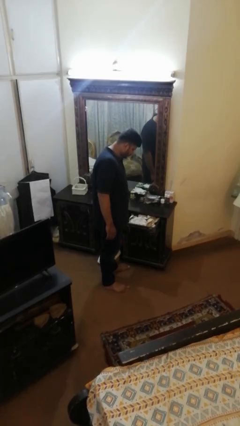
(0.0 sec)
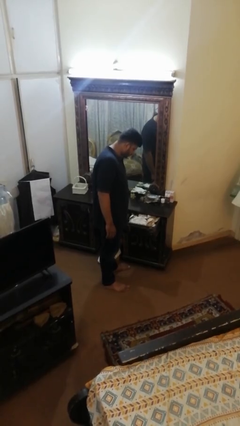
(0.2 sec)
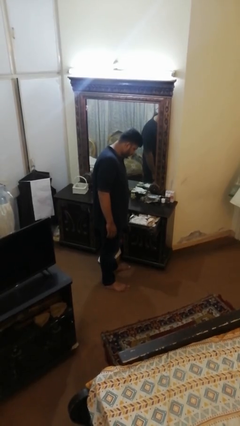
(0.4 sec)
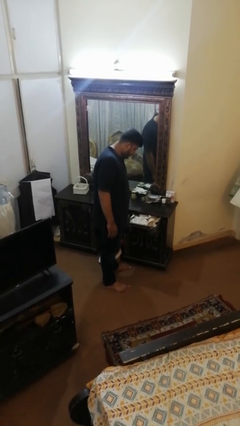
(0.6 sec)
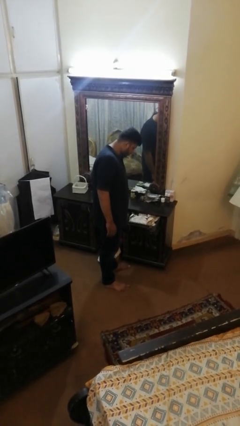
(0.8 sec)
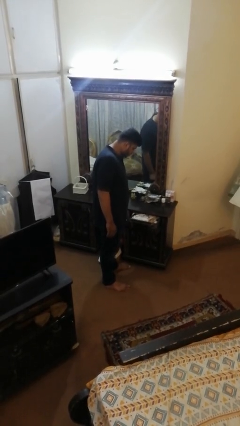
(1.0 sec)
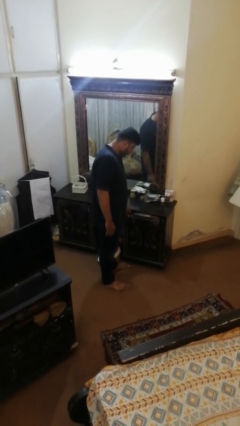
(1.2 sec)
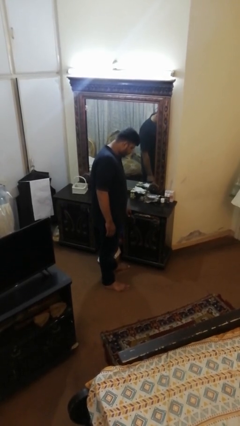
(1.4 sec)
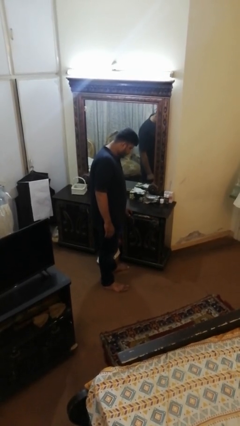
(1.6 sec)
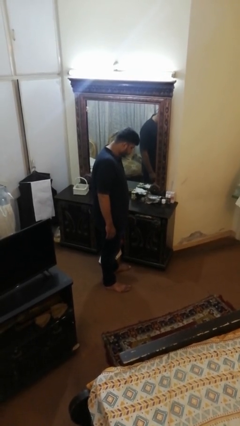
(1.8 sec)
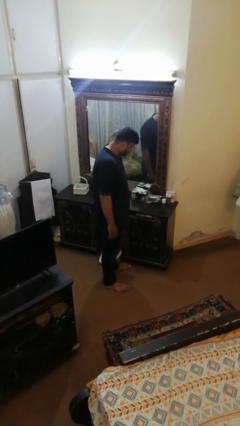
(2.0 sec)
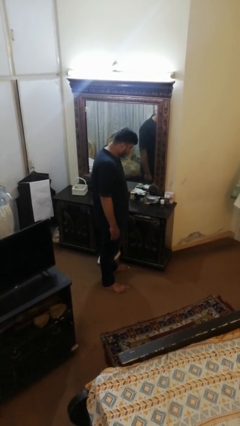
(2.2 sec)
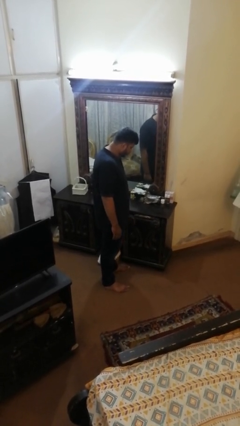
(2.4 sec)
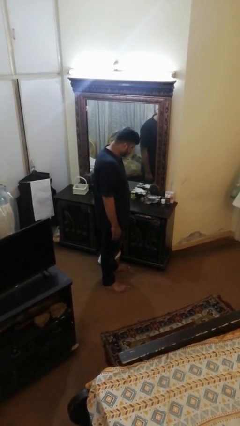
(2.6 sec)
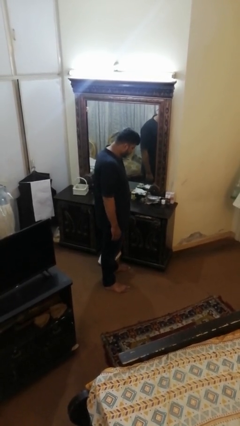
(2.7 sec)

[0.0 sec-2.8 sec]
person closes dresser drawer

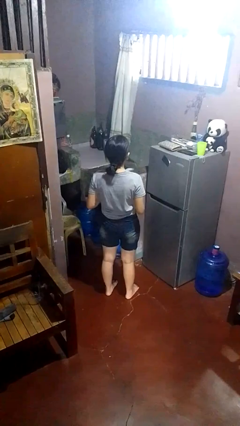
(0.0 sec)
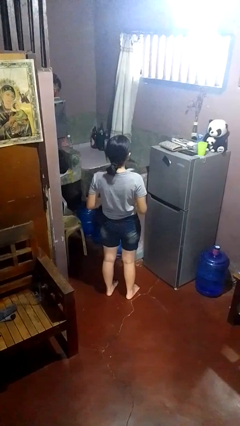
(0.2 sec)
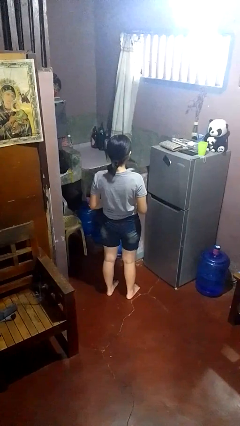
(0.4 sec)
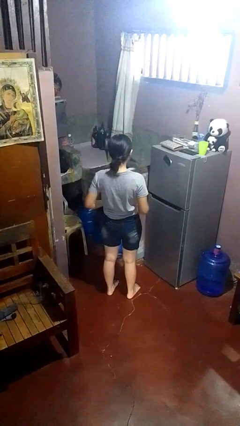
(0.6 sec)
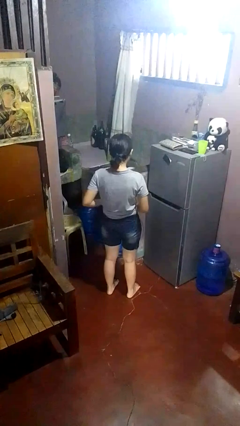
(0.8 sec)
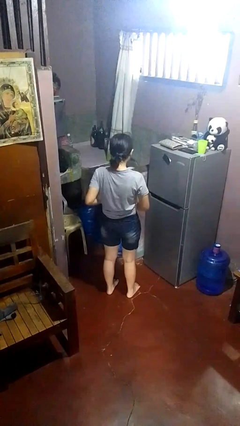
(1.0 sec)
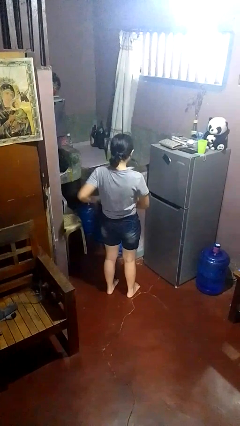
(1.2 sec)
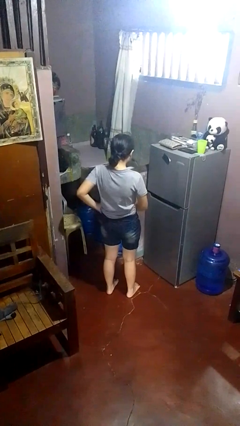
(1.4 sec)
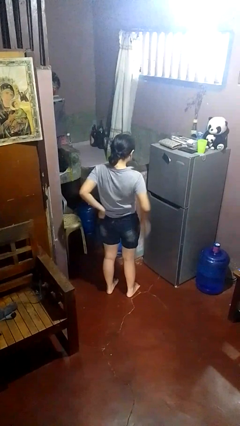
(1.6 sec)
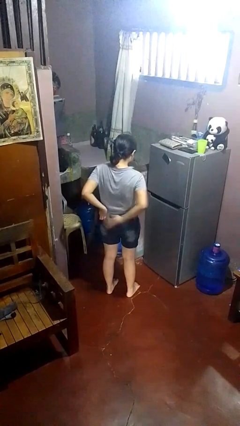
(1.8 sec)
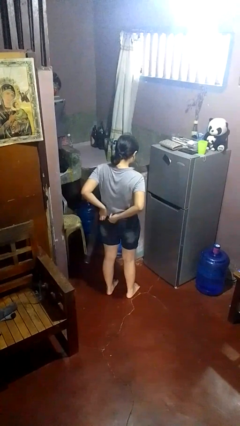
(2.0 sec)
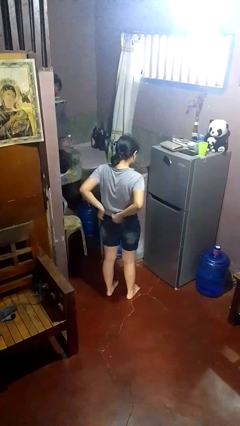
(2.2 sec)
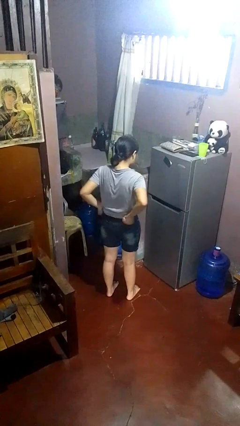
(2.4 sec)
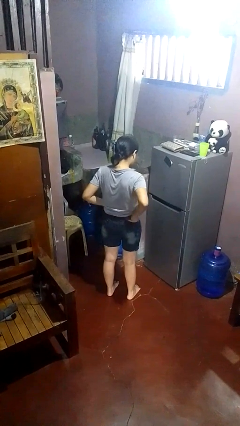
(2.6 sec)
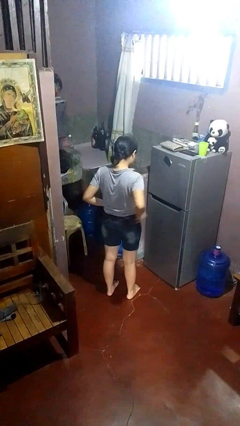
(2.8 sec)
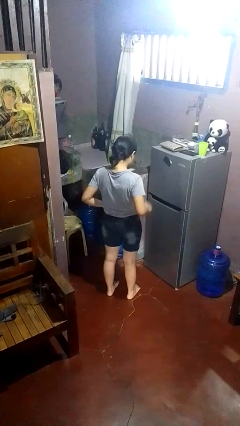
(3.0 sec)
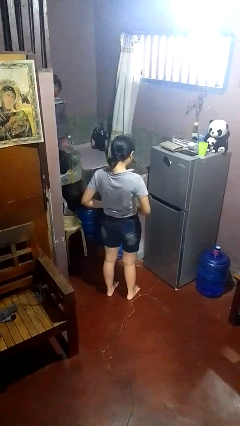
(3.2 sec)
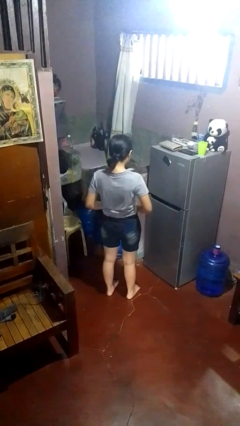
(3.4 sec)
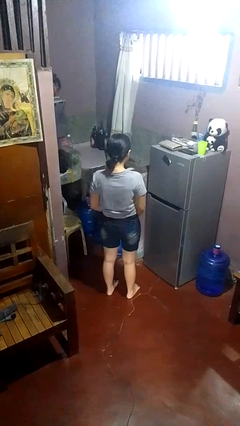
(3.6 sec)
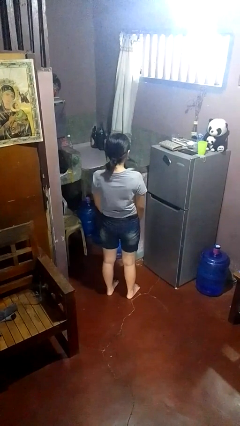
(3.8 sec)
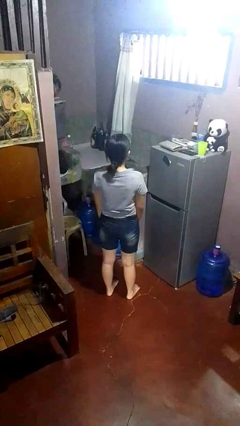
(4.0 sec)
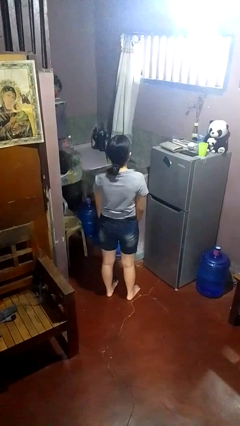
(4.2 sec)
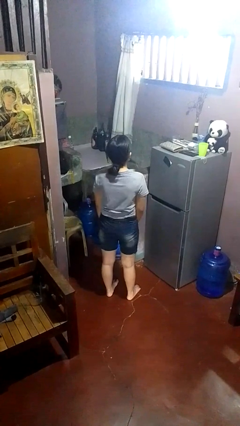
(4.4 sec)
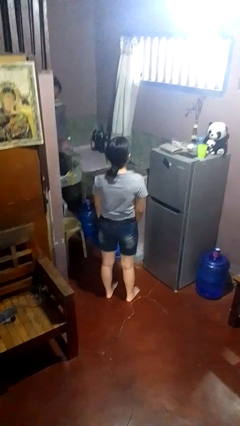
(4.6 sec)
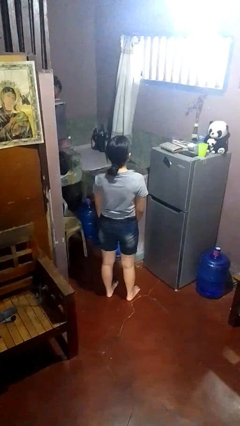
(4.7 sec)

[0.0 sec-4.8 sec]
person puts on belt

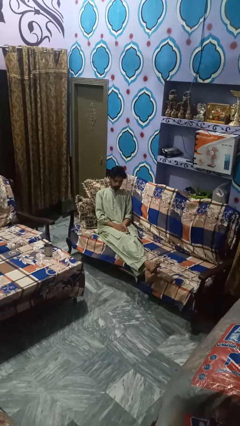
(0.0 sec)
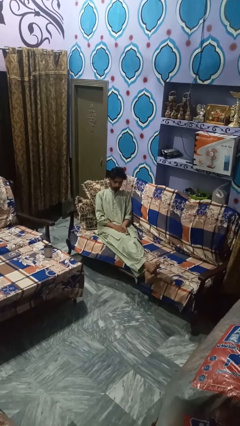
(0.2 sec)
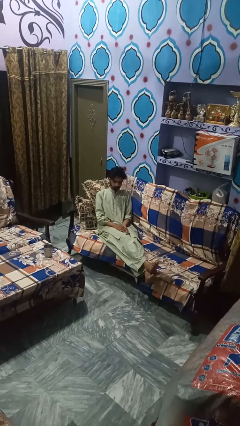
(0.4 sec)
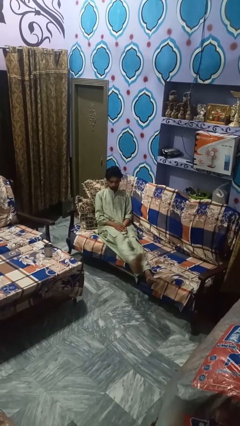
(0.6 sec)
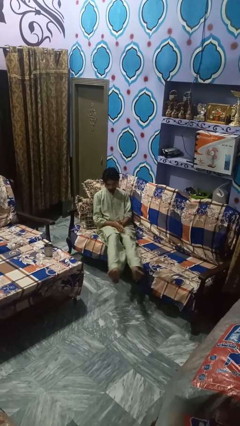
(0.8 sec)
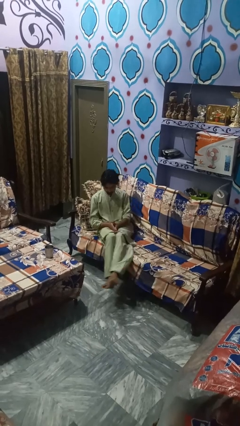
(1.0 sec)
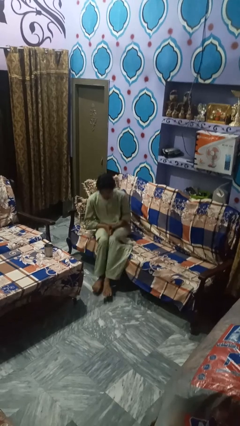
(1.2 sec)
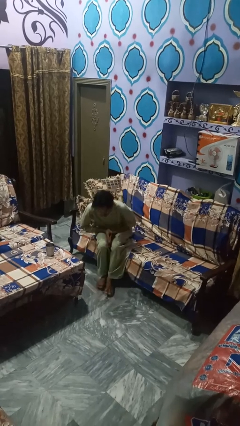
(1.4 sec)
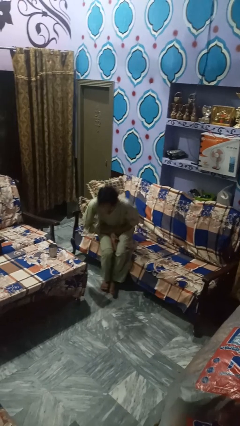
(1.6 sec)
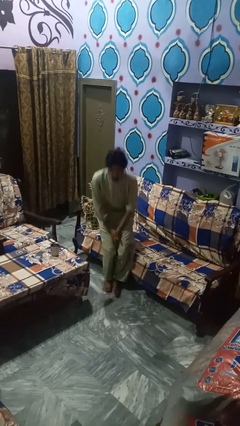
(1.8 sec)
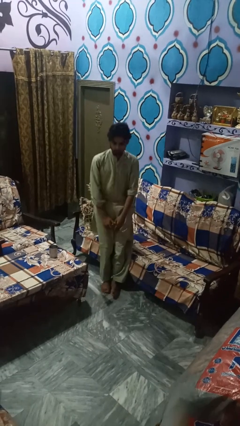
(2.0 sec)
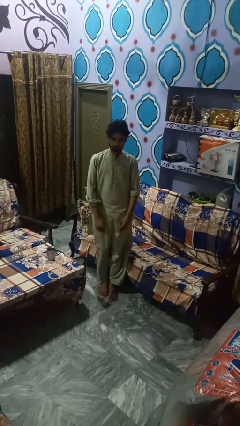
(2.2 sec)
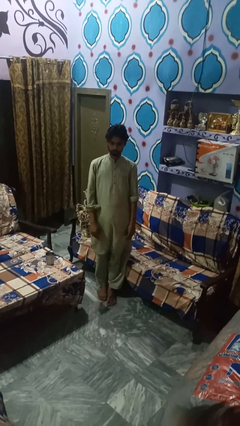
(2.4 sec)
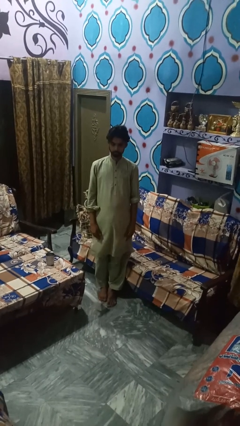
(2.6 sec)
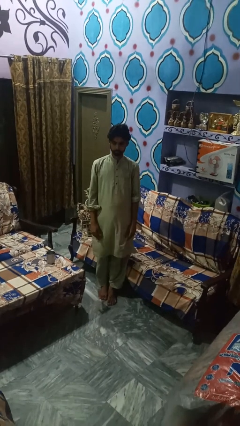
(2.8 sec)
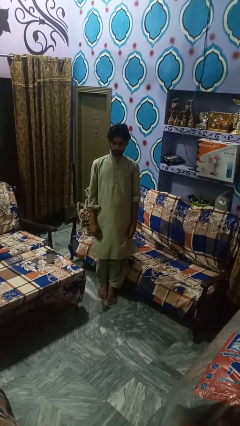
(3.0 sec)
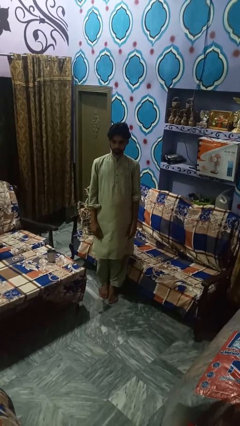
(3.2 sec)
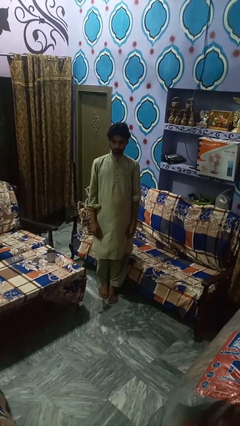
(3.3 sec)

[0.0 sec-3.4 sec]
person stands up

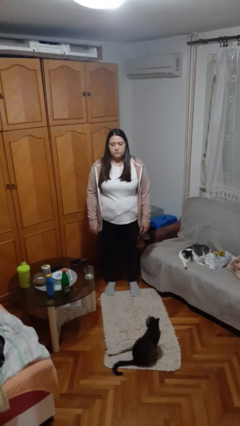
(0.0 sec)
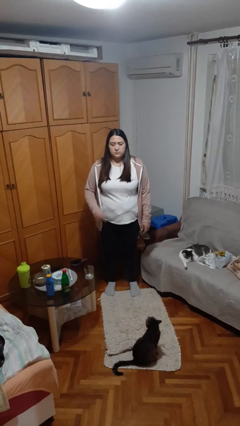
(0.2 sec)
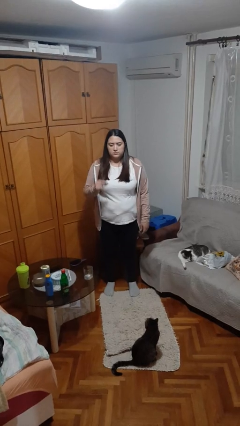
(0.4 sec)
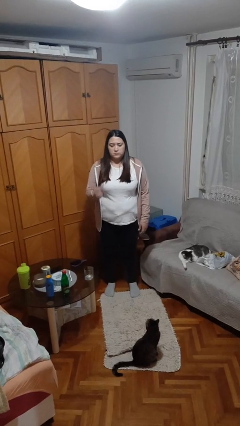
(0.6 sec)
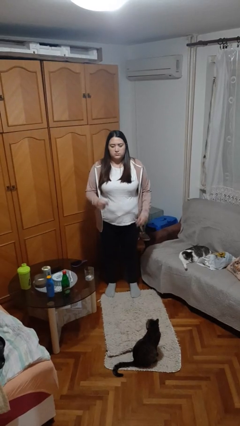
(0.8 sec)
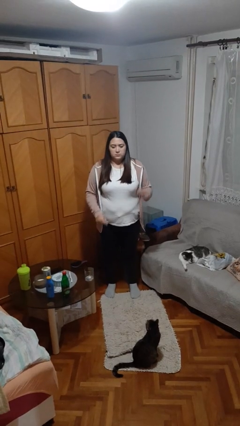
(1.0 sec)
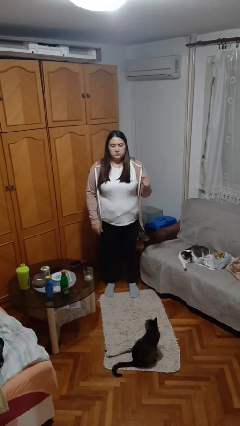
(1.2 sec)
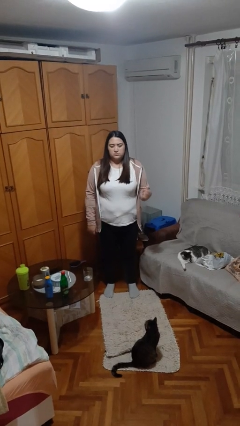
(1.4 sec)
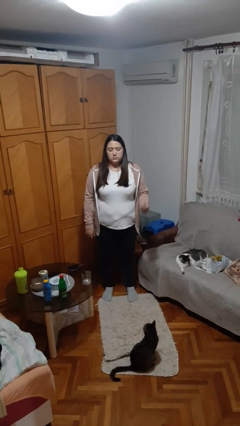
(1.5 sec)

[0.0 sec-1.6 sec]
person snaps fingers

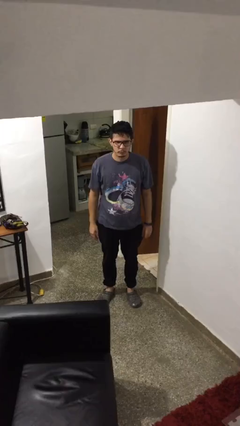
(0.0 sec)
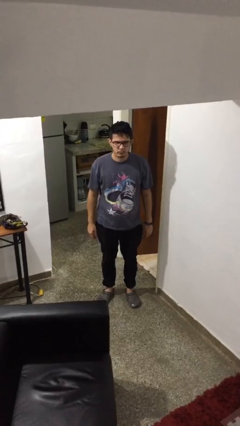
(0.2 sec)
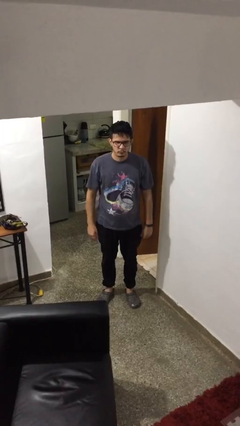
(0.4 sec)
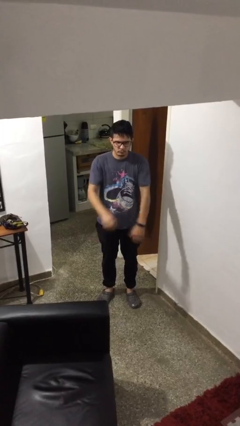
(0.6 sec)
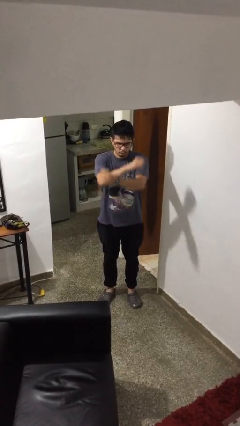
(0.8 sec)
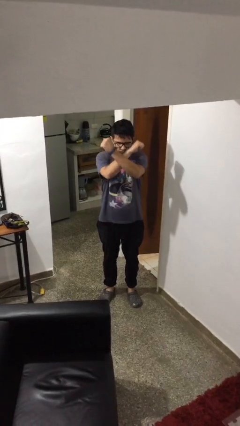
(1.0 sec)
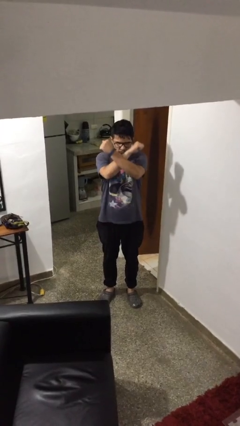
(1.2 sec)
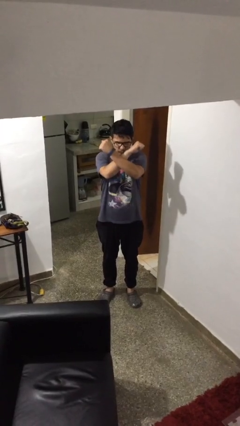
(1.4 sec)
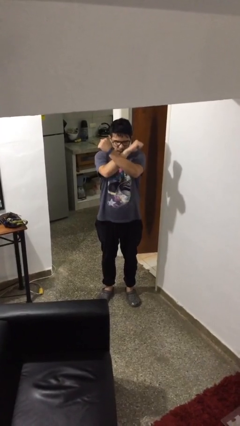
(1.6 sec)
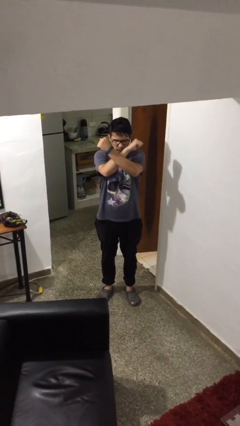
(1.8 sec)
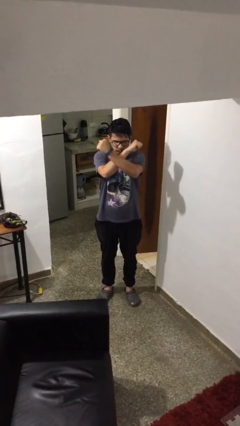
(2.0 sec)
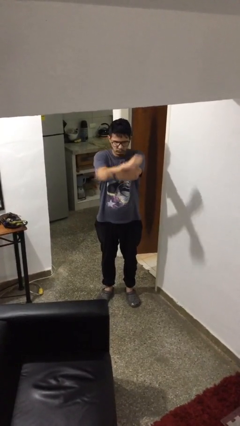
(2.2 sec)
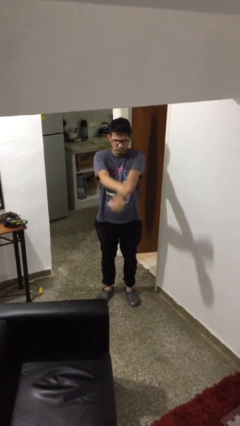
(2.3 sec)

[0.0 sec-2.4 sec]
person gestures arms x

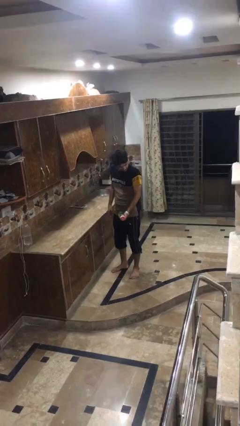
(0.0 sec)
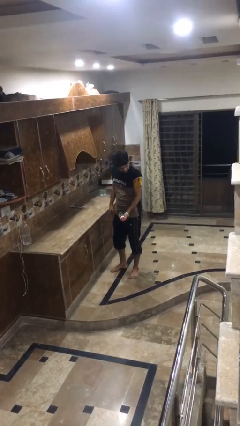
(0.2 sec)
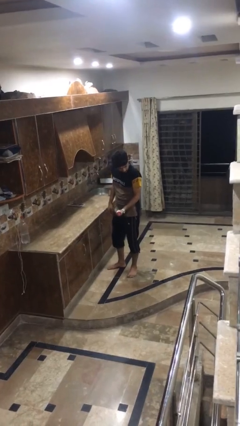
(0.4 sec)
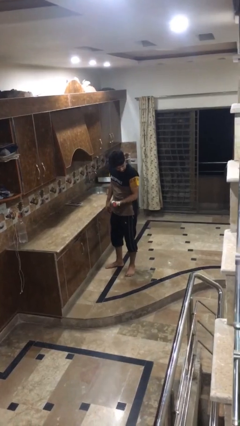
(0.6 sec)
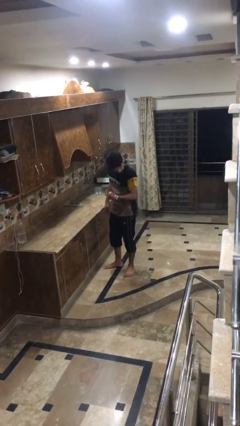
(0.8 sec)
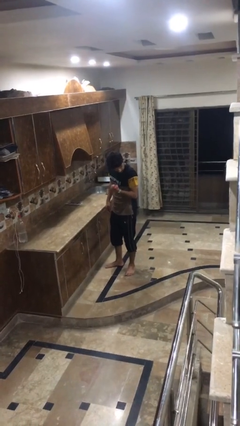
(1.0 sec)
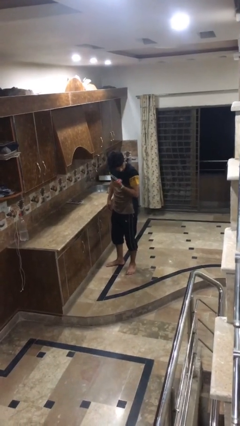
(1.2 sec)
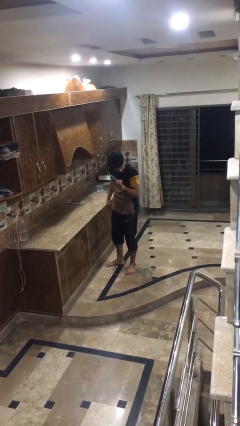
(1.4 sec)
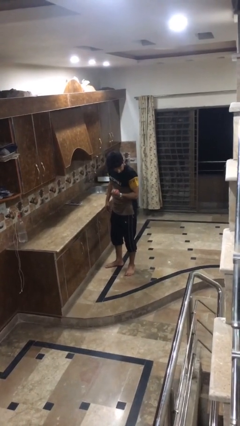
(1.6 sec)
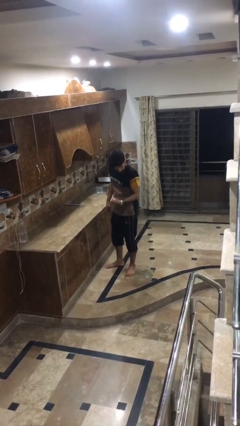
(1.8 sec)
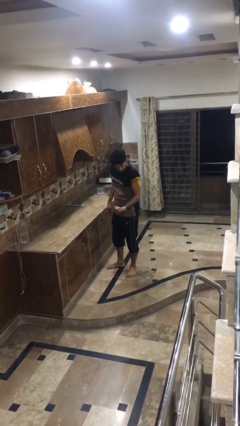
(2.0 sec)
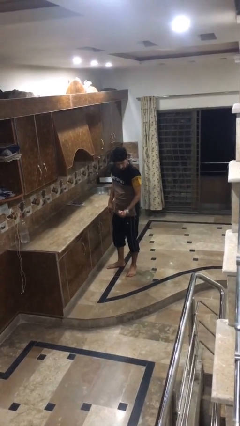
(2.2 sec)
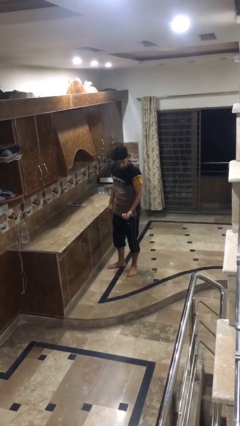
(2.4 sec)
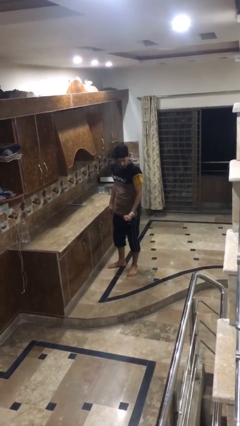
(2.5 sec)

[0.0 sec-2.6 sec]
person lifts dumbbells
